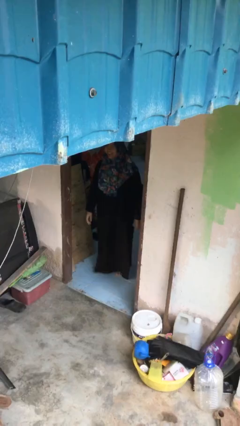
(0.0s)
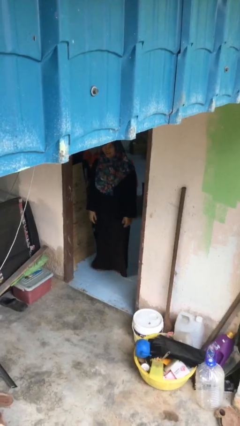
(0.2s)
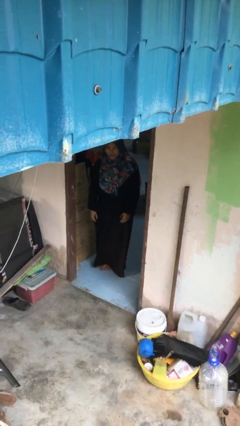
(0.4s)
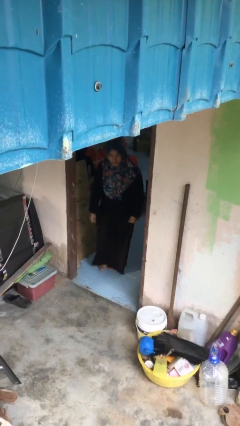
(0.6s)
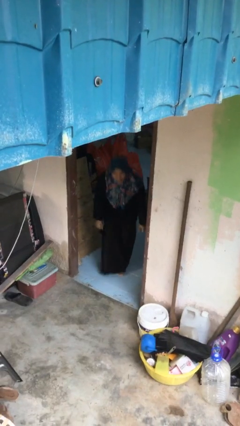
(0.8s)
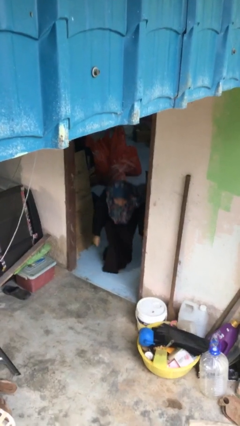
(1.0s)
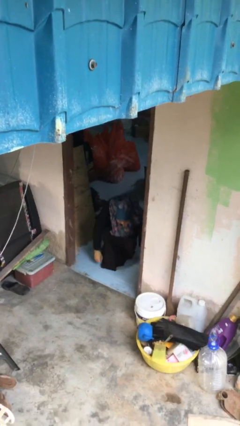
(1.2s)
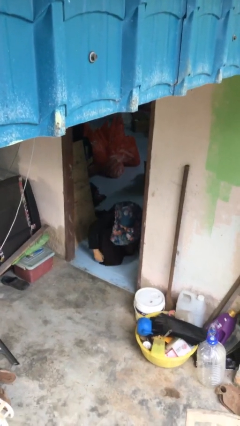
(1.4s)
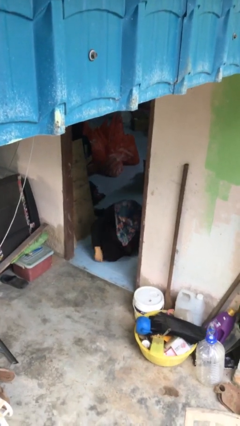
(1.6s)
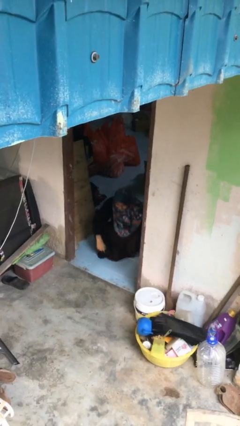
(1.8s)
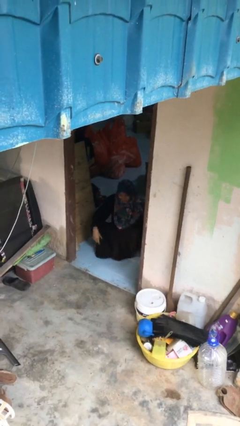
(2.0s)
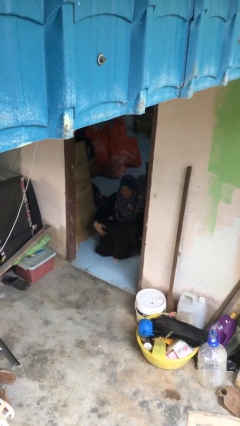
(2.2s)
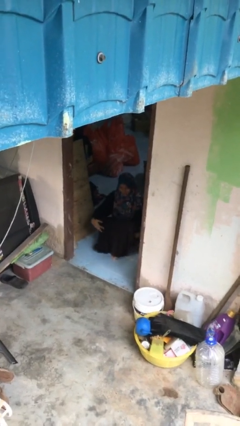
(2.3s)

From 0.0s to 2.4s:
person sits down

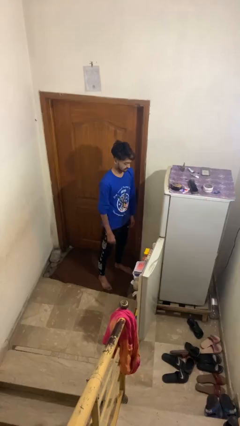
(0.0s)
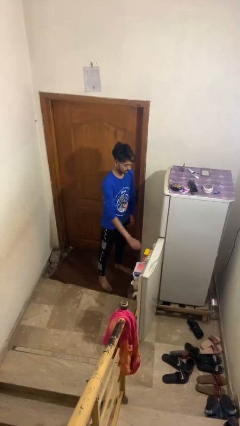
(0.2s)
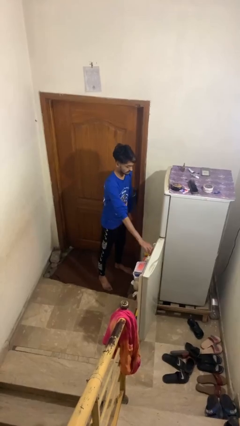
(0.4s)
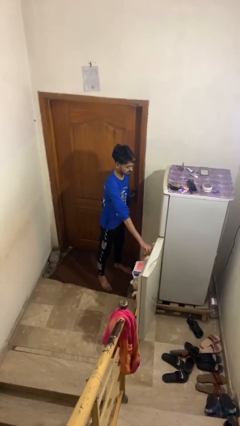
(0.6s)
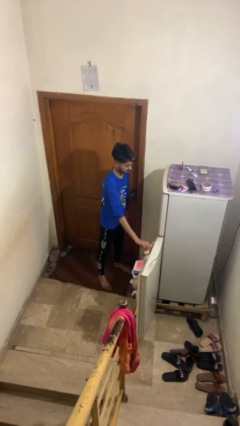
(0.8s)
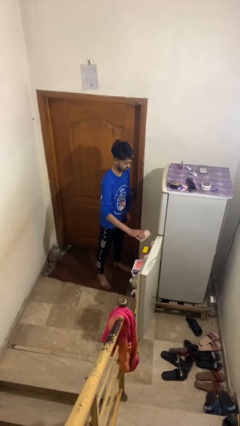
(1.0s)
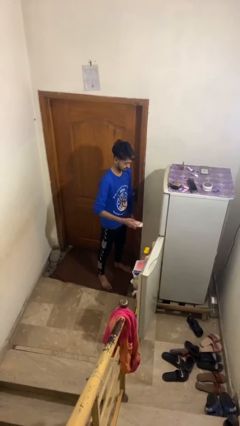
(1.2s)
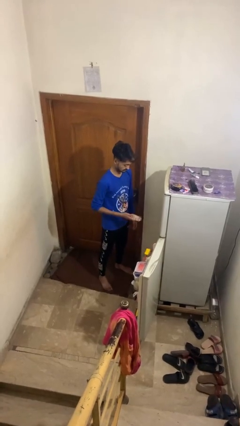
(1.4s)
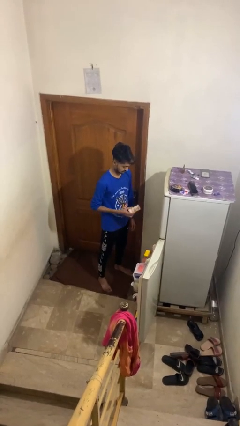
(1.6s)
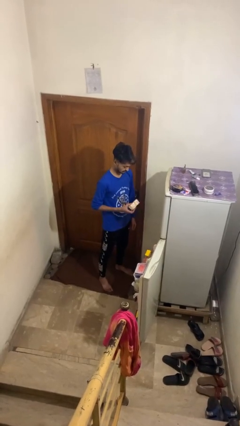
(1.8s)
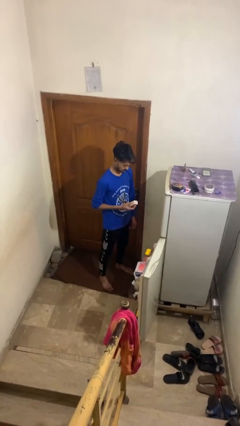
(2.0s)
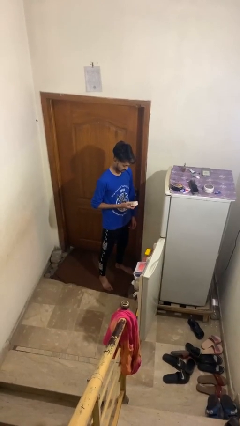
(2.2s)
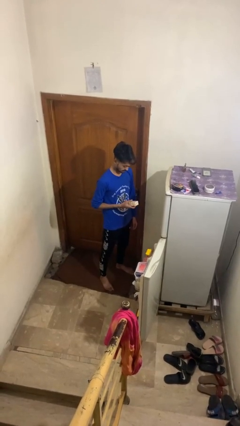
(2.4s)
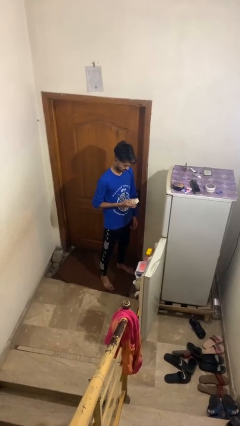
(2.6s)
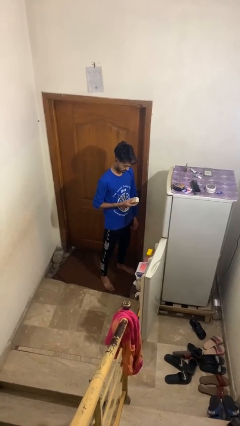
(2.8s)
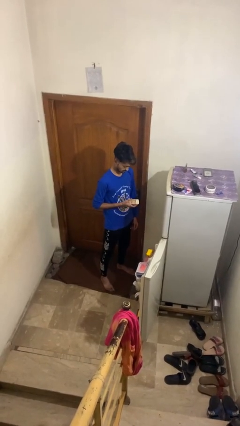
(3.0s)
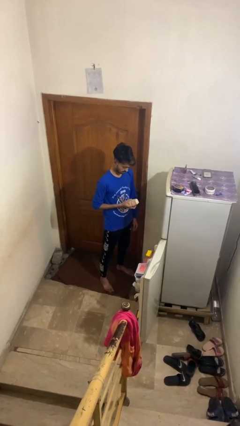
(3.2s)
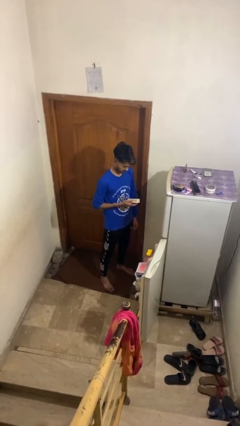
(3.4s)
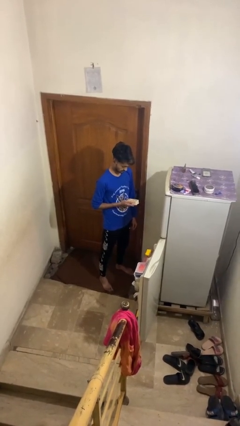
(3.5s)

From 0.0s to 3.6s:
person takes object from refrigerator

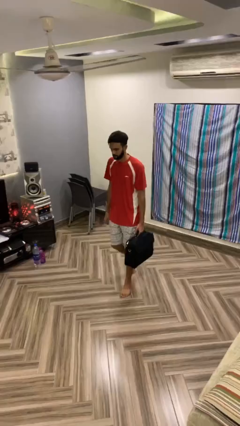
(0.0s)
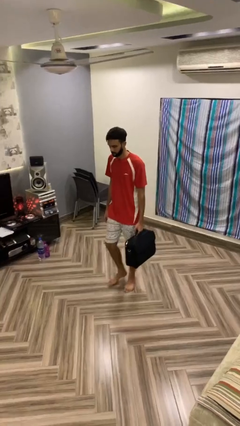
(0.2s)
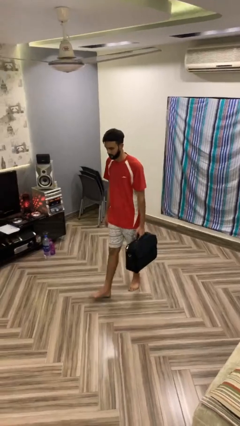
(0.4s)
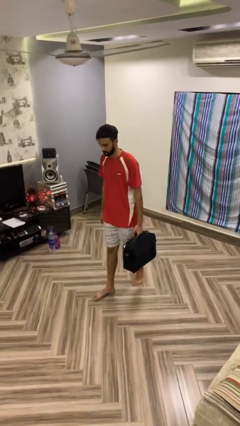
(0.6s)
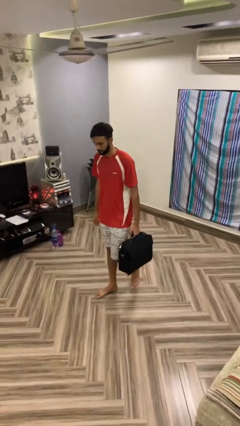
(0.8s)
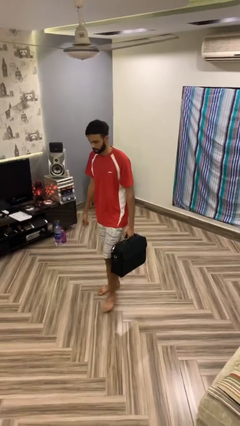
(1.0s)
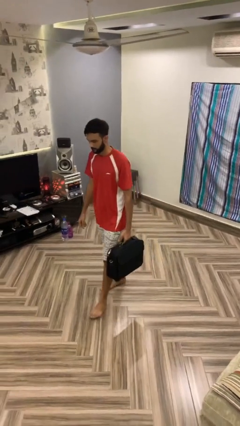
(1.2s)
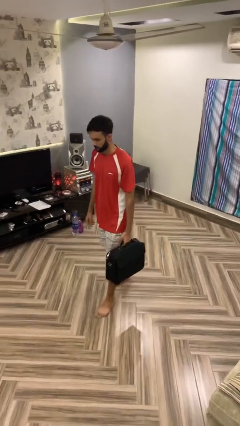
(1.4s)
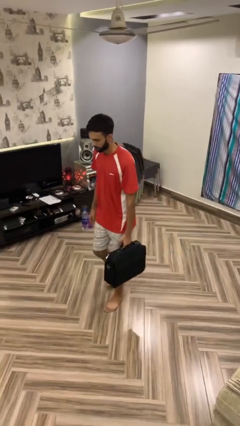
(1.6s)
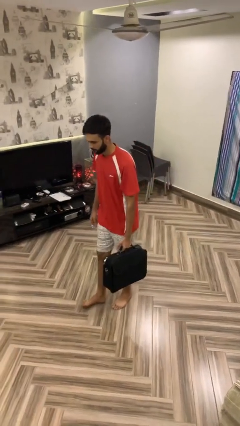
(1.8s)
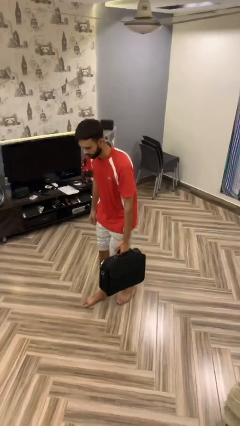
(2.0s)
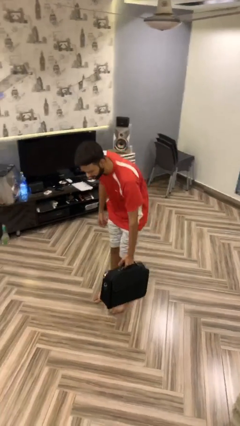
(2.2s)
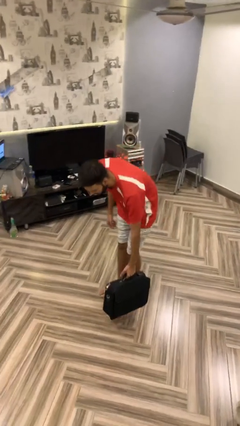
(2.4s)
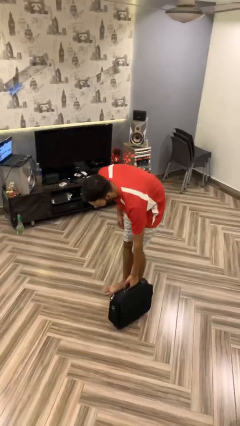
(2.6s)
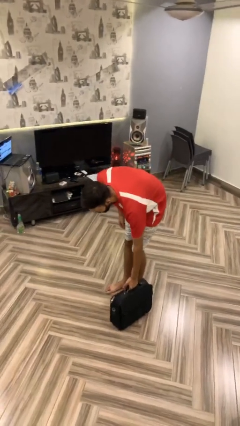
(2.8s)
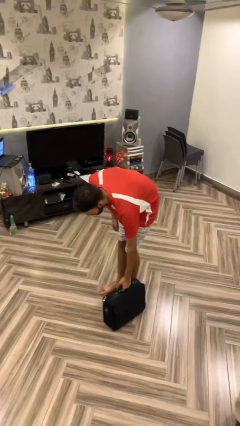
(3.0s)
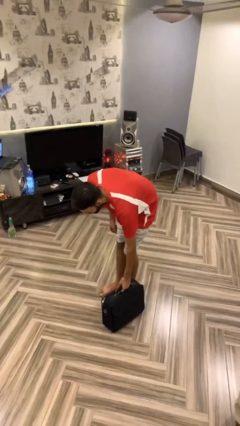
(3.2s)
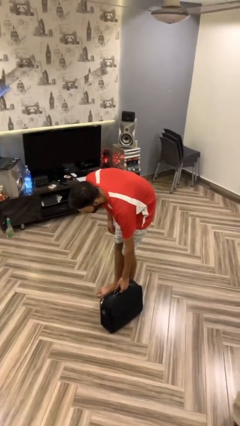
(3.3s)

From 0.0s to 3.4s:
person puts down object on floor

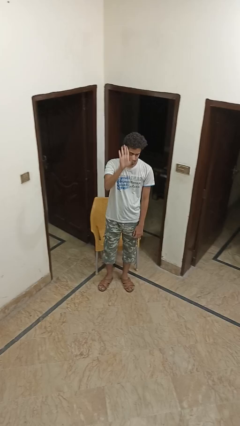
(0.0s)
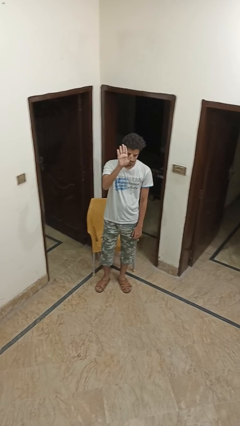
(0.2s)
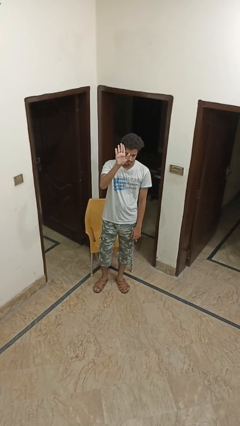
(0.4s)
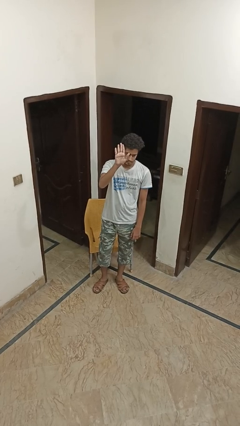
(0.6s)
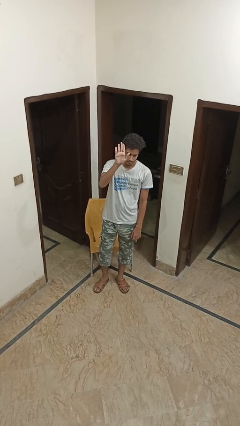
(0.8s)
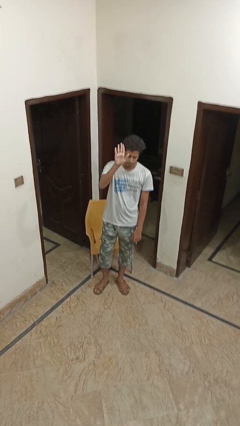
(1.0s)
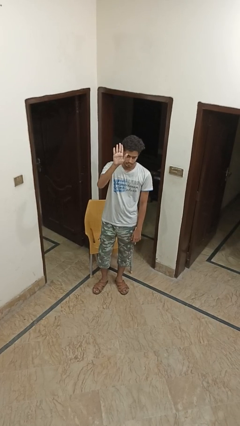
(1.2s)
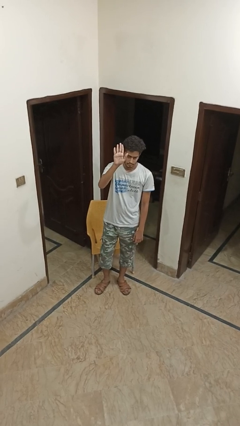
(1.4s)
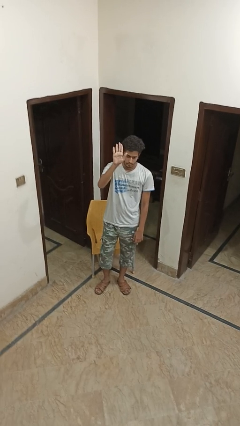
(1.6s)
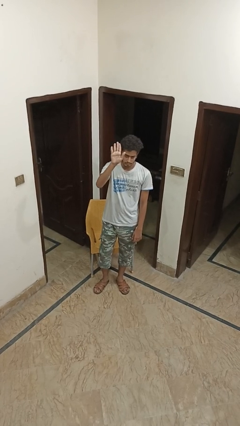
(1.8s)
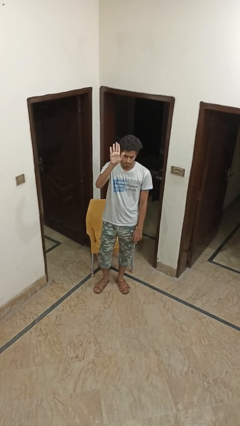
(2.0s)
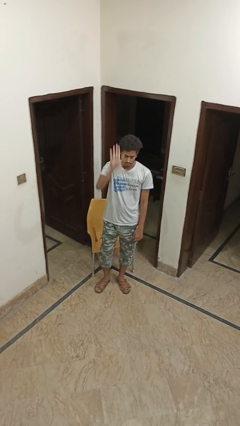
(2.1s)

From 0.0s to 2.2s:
person gestures raise hand

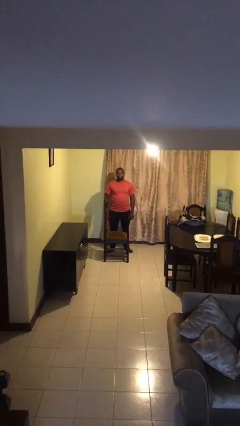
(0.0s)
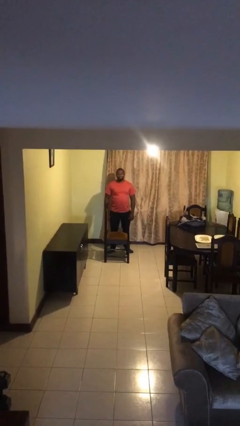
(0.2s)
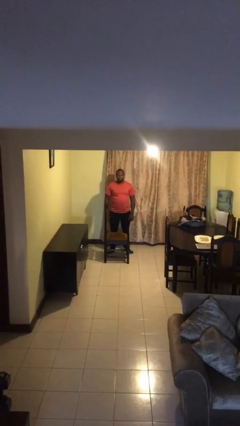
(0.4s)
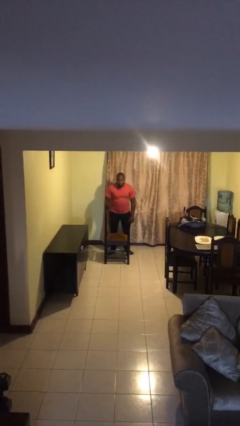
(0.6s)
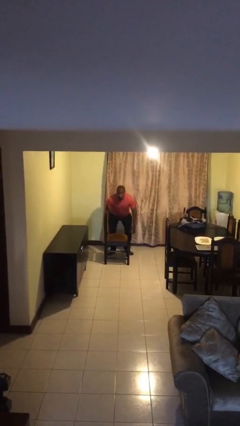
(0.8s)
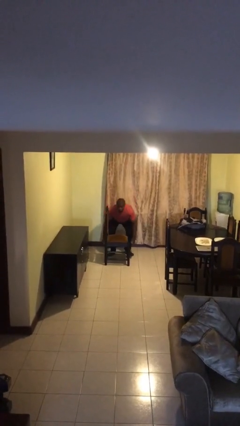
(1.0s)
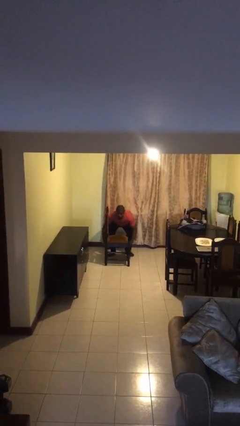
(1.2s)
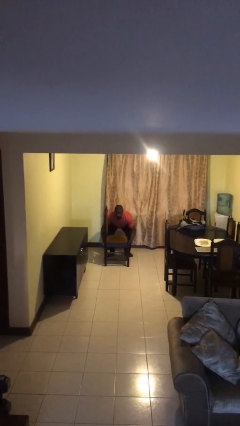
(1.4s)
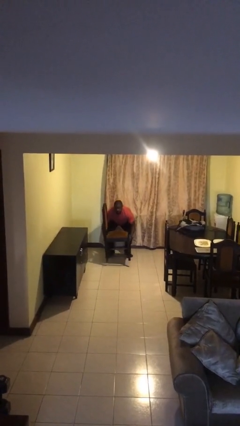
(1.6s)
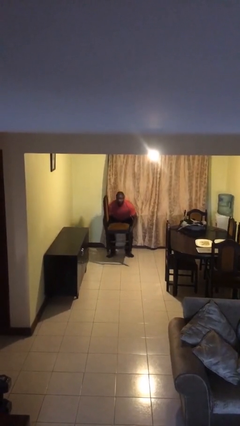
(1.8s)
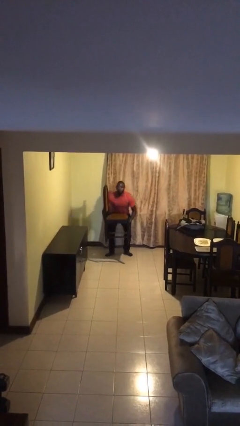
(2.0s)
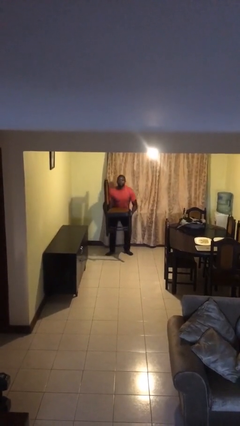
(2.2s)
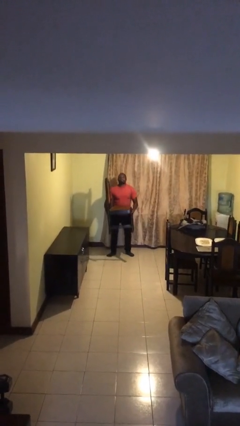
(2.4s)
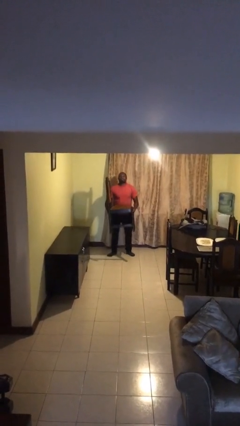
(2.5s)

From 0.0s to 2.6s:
person picks up object from floor

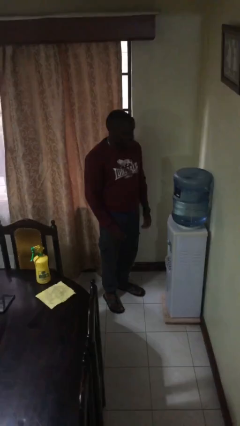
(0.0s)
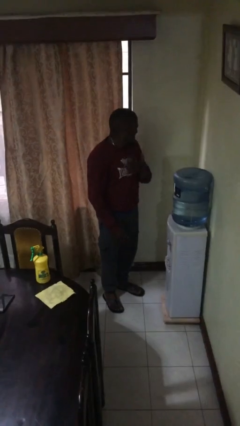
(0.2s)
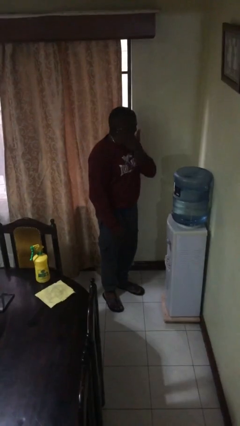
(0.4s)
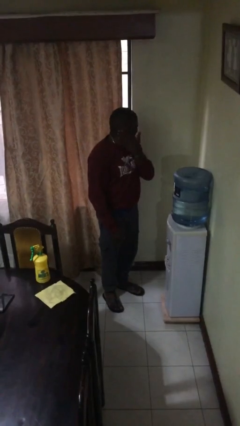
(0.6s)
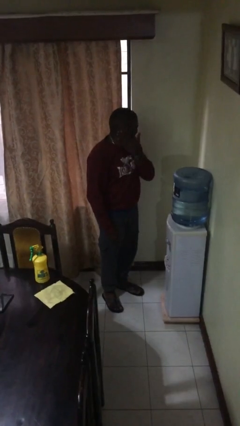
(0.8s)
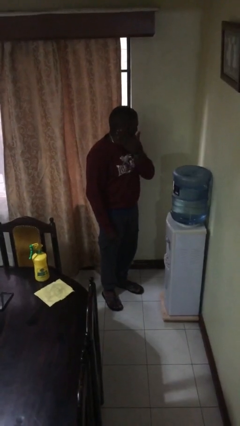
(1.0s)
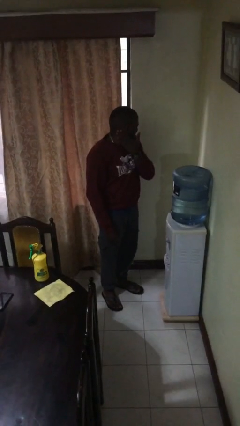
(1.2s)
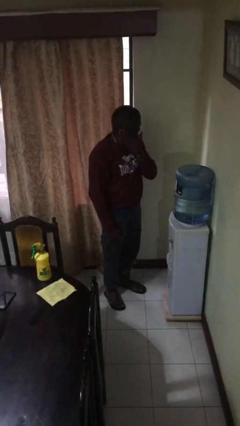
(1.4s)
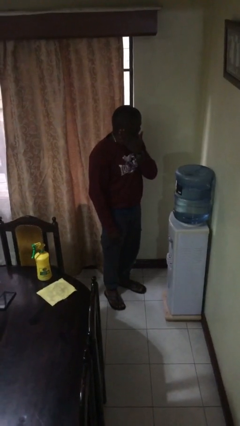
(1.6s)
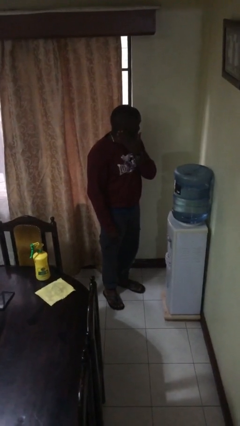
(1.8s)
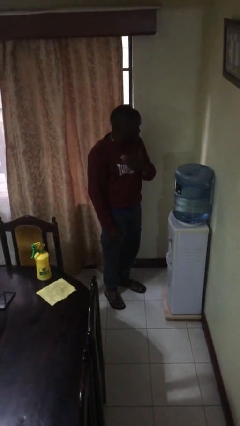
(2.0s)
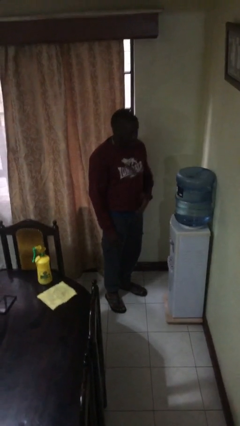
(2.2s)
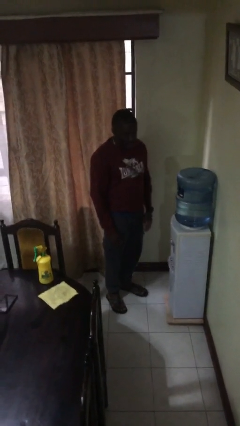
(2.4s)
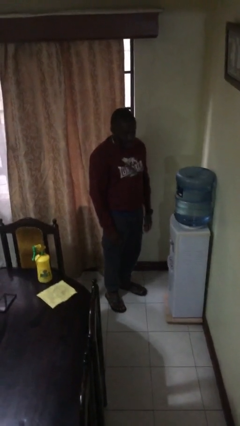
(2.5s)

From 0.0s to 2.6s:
person swats bug

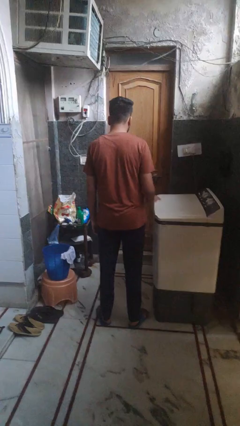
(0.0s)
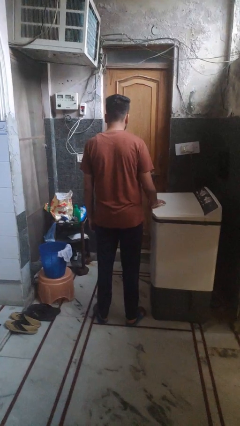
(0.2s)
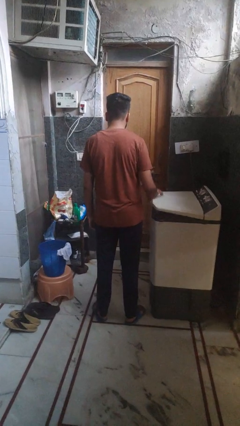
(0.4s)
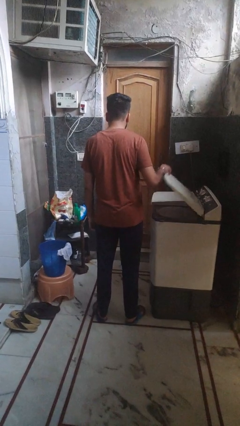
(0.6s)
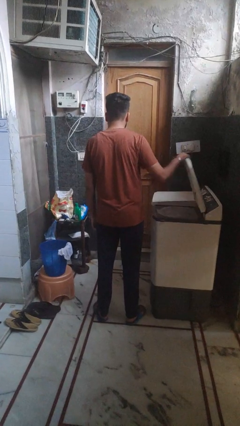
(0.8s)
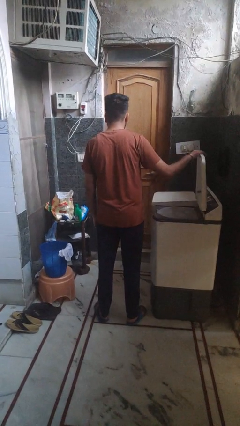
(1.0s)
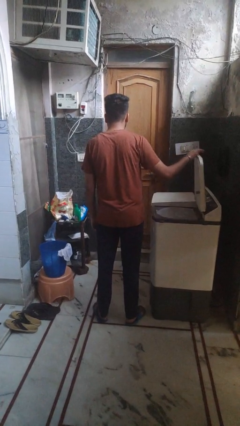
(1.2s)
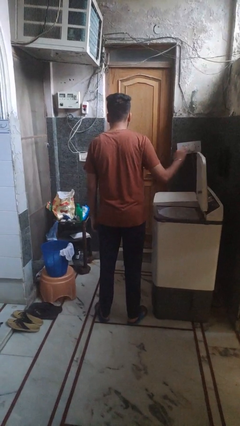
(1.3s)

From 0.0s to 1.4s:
person opens clothes washer
